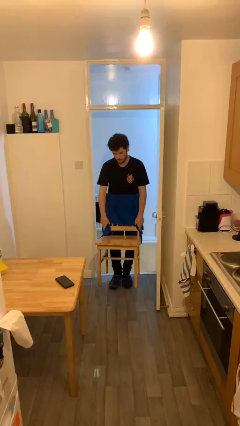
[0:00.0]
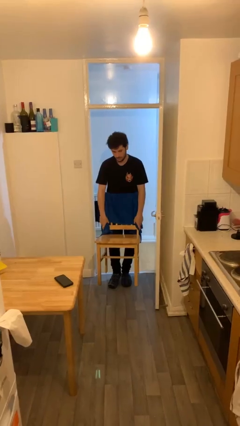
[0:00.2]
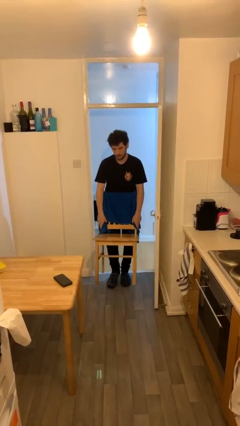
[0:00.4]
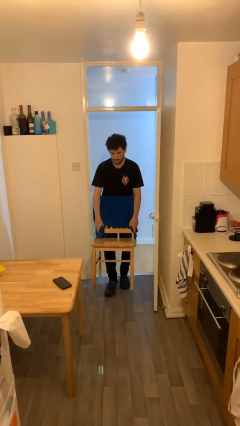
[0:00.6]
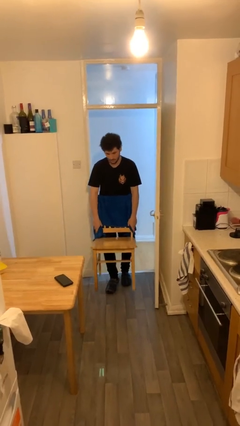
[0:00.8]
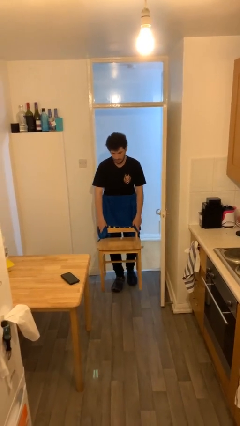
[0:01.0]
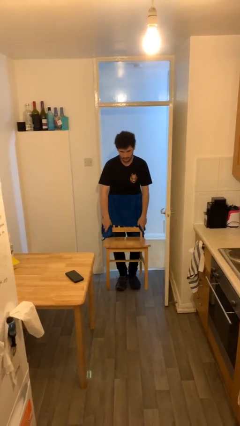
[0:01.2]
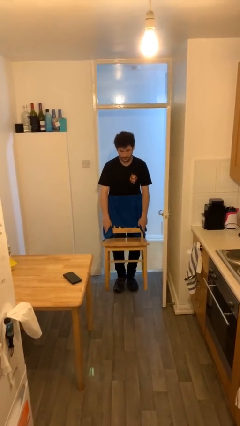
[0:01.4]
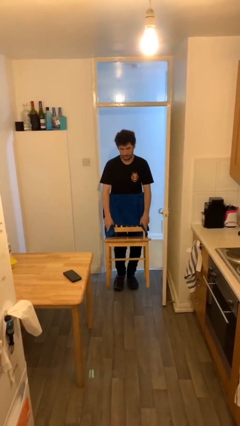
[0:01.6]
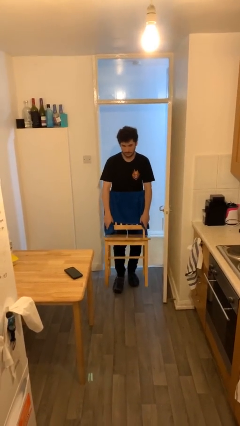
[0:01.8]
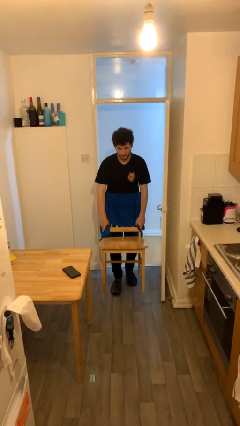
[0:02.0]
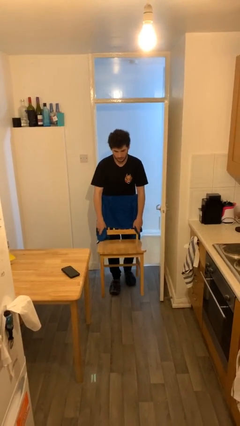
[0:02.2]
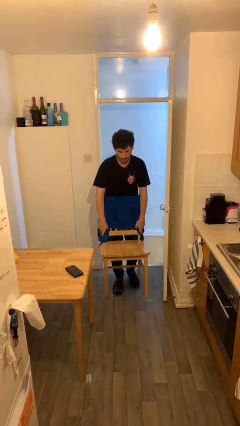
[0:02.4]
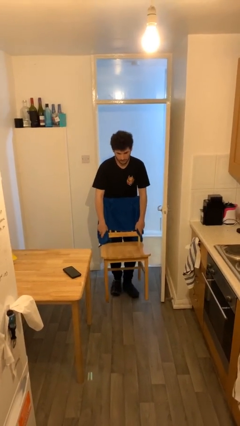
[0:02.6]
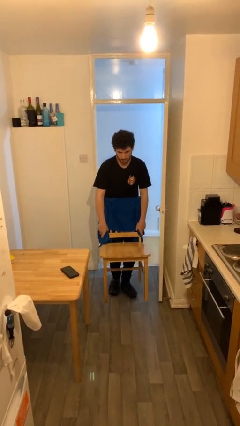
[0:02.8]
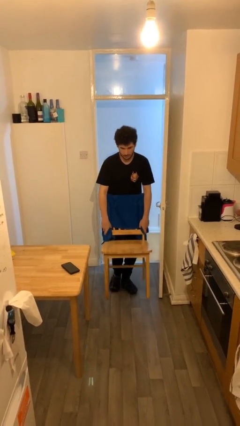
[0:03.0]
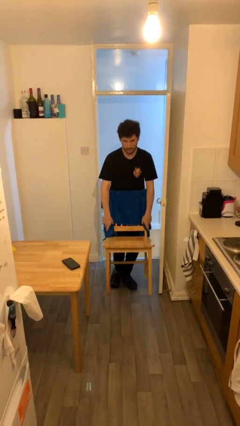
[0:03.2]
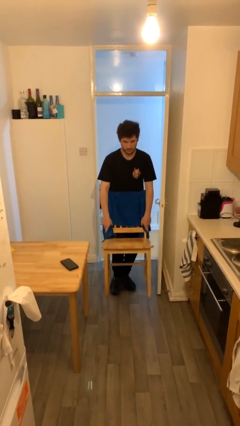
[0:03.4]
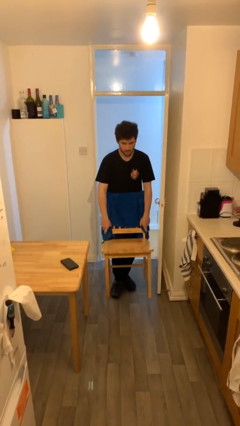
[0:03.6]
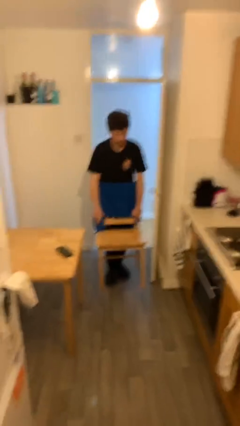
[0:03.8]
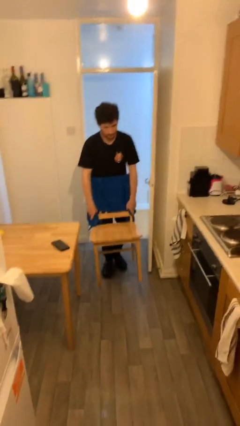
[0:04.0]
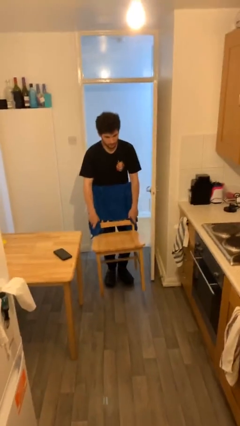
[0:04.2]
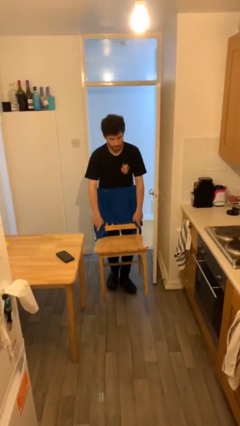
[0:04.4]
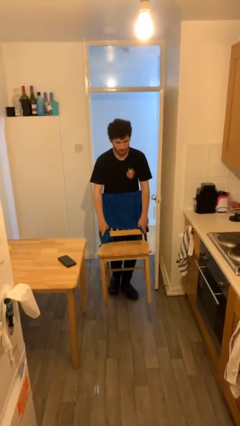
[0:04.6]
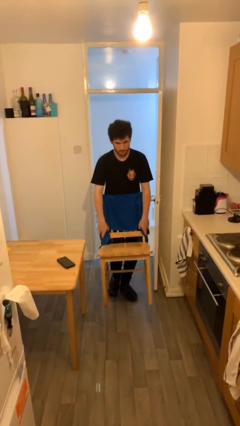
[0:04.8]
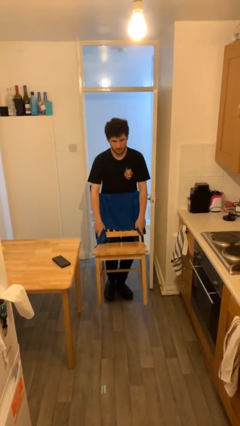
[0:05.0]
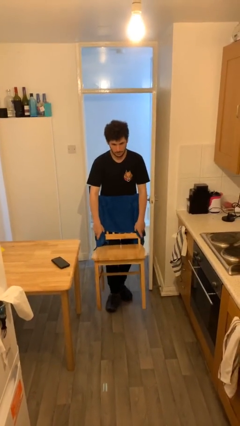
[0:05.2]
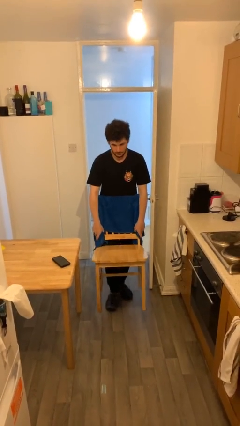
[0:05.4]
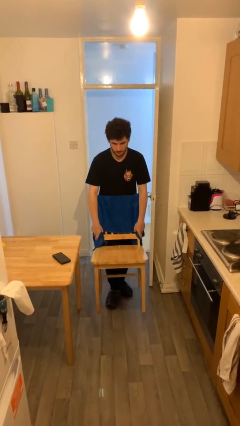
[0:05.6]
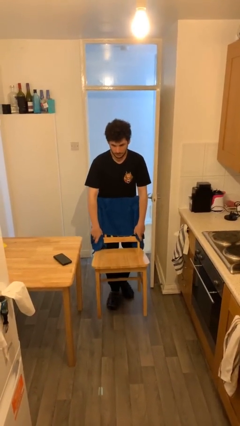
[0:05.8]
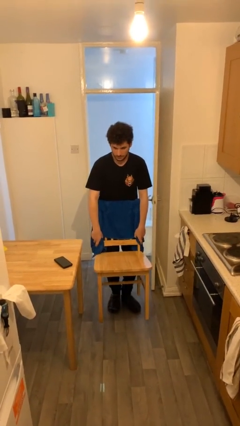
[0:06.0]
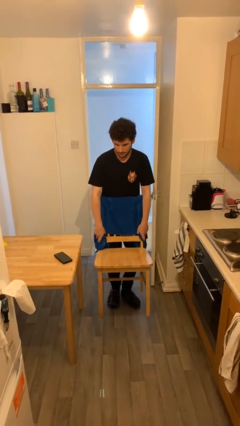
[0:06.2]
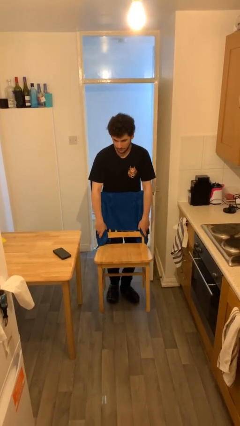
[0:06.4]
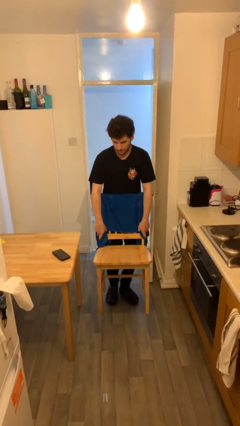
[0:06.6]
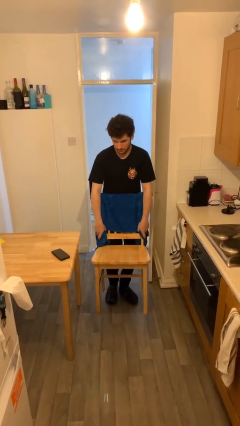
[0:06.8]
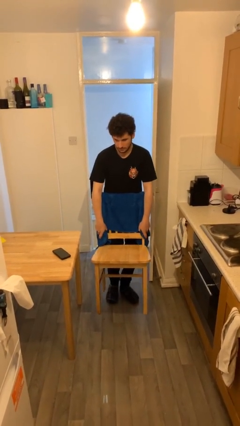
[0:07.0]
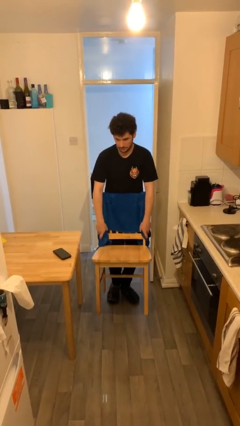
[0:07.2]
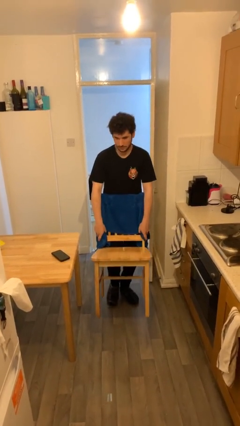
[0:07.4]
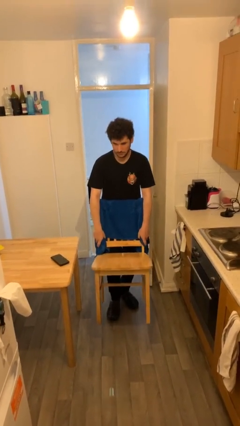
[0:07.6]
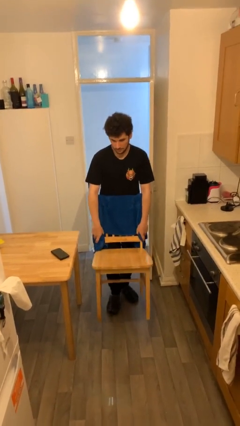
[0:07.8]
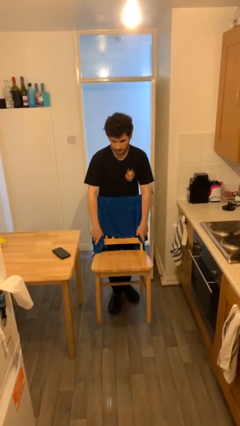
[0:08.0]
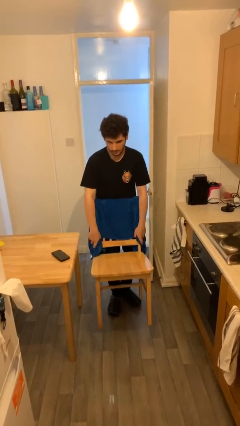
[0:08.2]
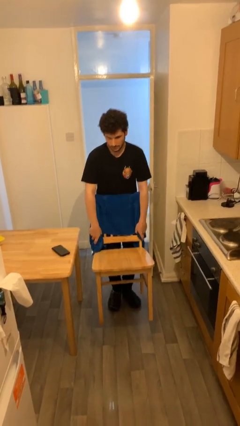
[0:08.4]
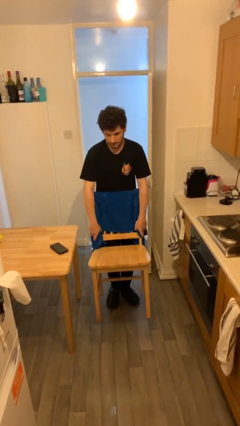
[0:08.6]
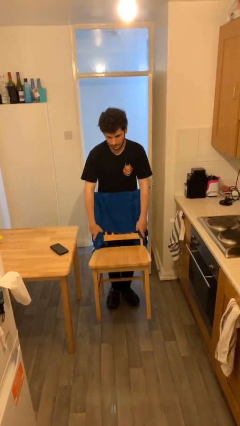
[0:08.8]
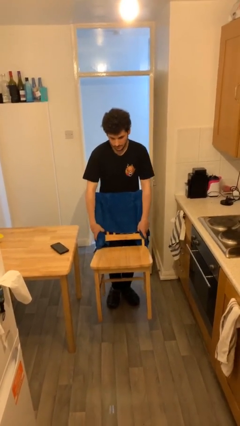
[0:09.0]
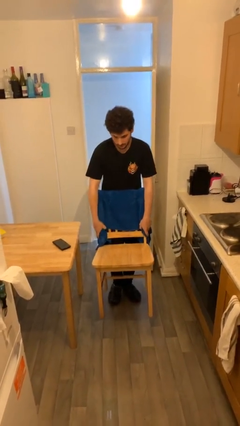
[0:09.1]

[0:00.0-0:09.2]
person carries heavy object

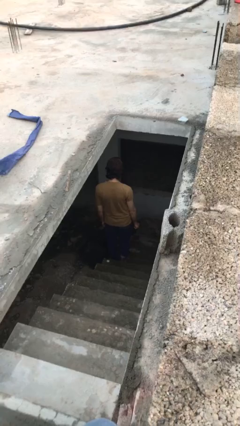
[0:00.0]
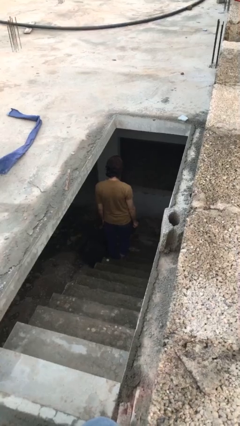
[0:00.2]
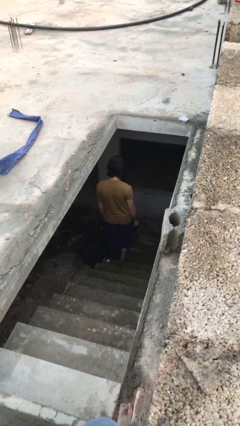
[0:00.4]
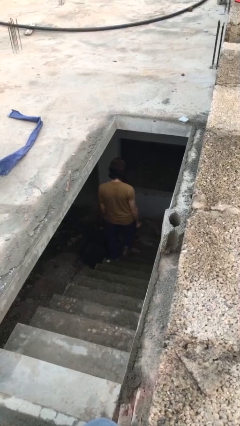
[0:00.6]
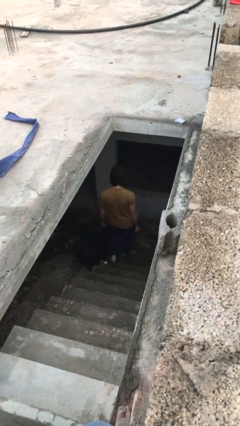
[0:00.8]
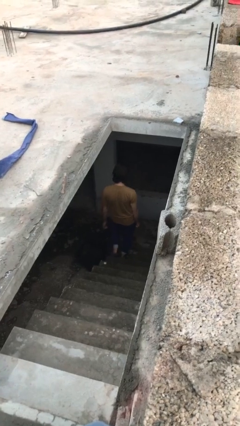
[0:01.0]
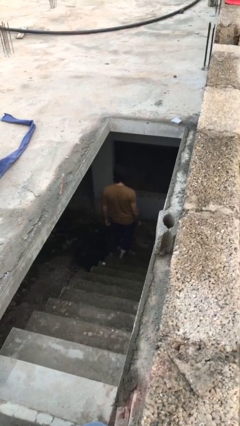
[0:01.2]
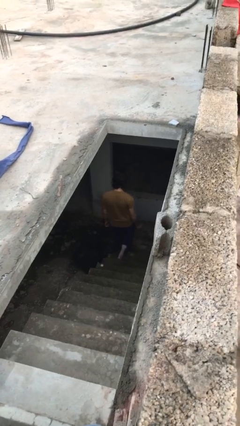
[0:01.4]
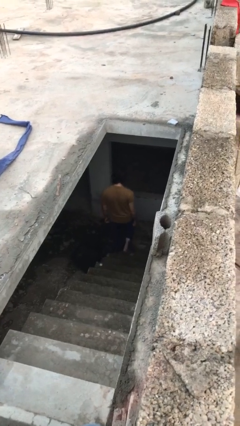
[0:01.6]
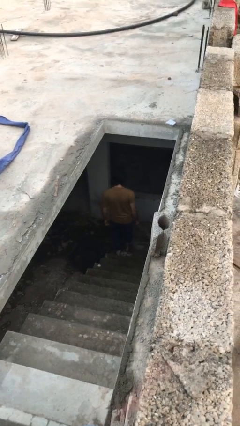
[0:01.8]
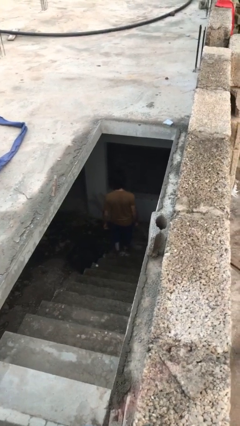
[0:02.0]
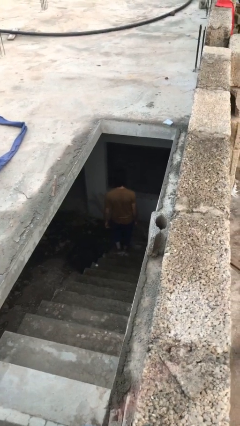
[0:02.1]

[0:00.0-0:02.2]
person climbs down stairs

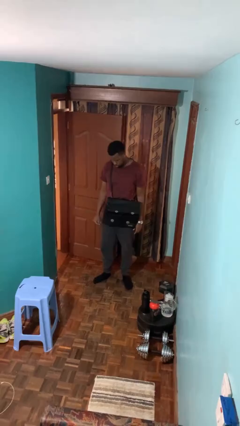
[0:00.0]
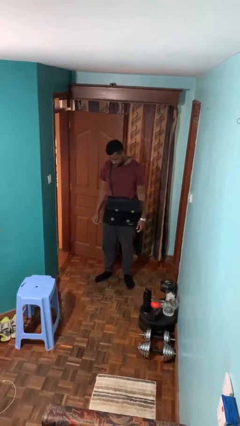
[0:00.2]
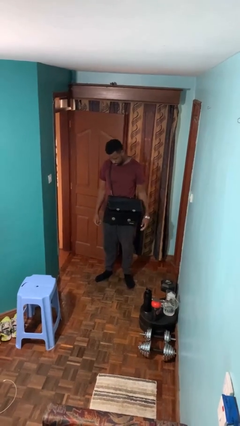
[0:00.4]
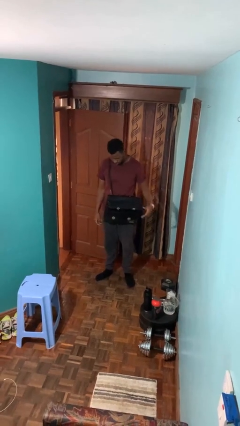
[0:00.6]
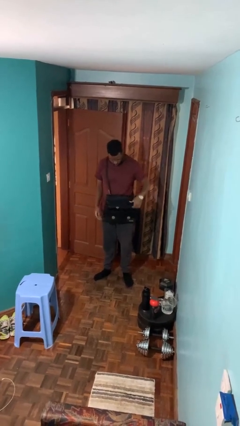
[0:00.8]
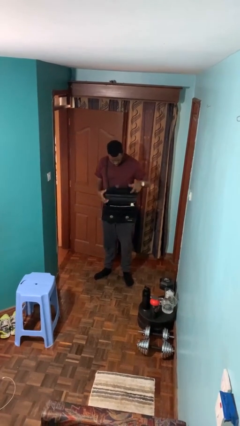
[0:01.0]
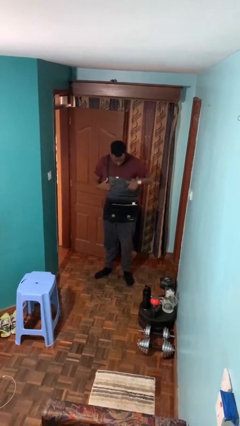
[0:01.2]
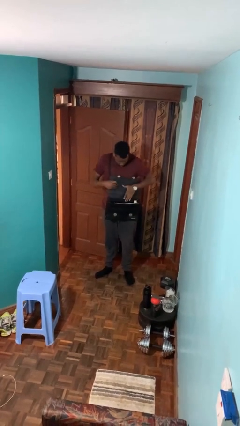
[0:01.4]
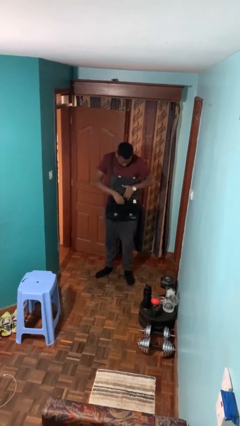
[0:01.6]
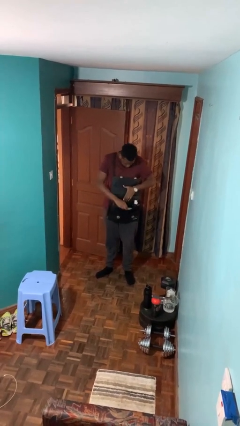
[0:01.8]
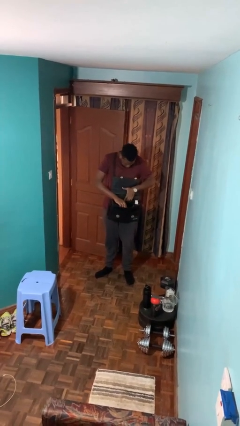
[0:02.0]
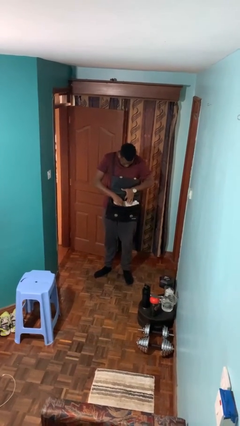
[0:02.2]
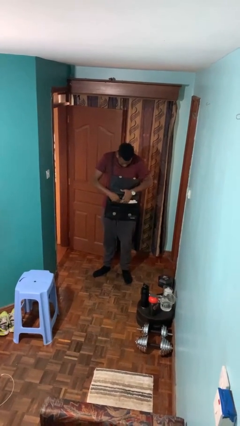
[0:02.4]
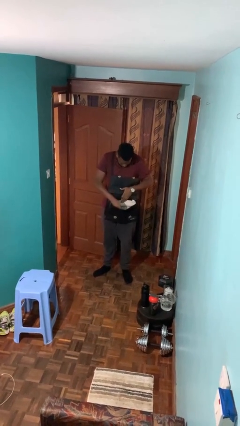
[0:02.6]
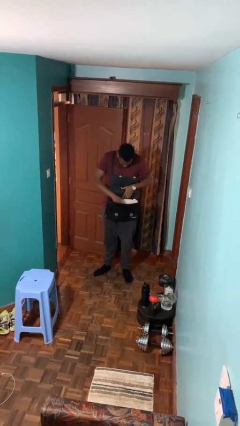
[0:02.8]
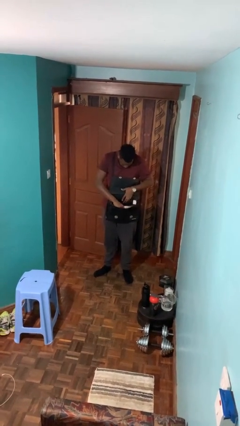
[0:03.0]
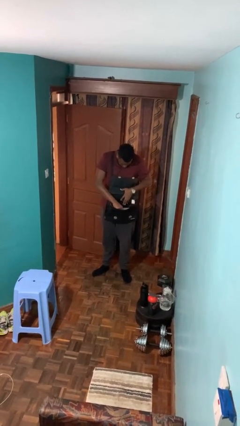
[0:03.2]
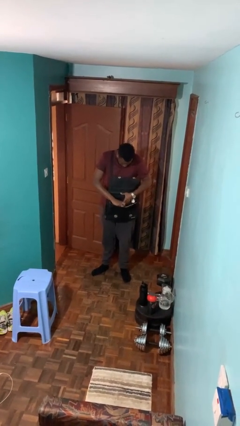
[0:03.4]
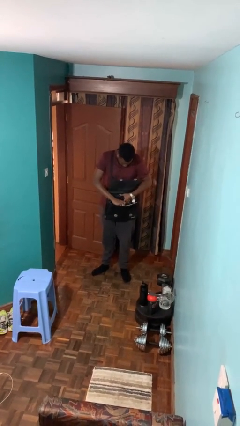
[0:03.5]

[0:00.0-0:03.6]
person searches in purse

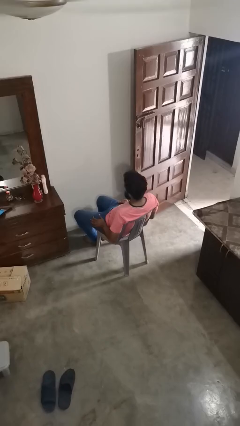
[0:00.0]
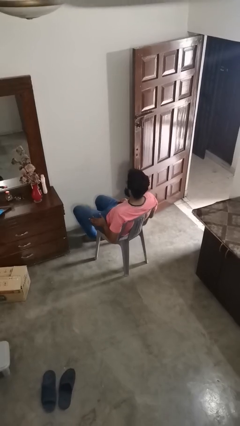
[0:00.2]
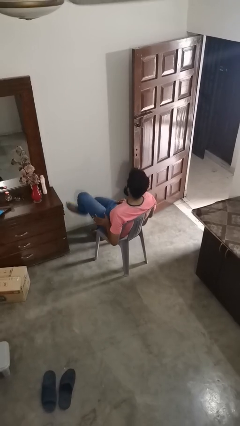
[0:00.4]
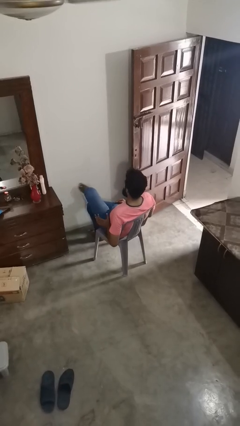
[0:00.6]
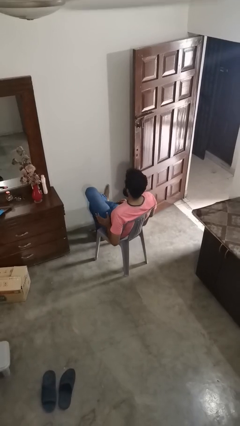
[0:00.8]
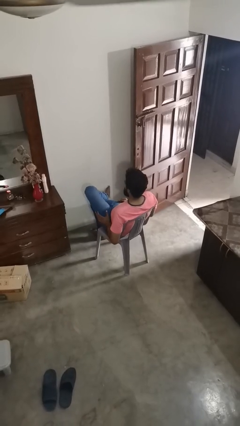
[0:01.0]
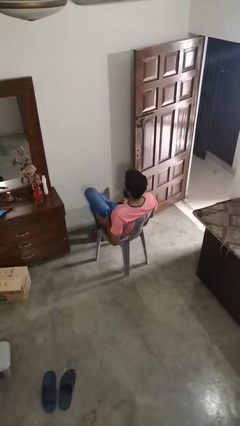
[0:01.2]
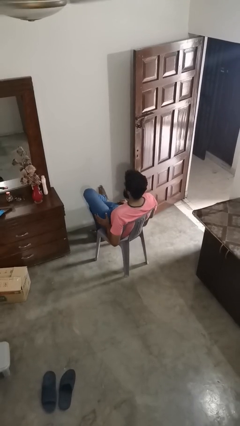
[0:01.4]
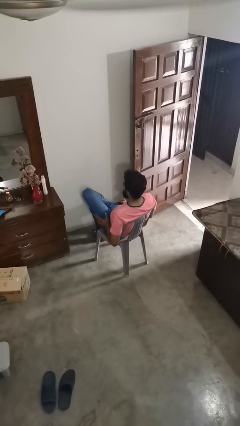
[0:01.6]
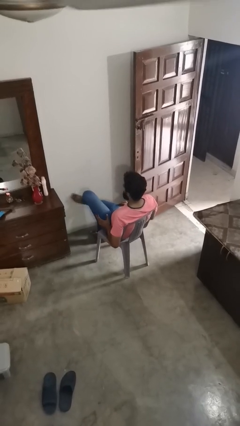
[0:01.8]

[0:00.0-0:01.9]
person crosses legs

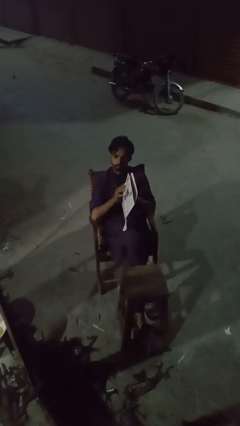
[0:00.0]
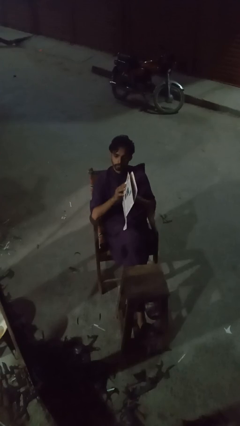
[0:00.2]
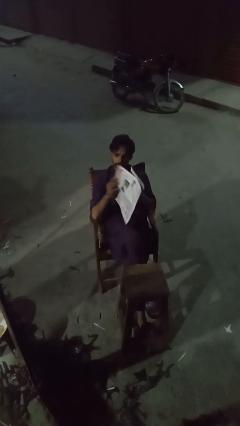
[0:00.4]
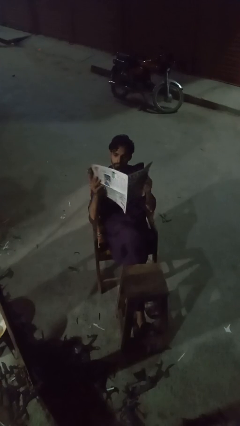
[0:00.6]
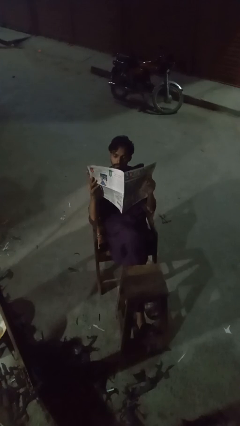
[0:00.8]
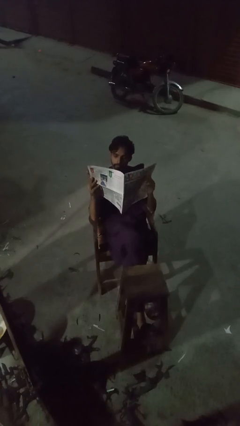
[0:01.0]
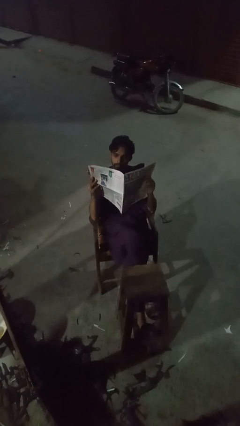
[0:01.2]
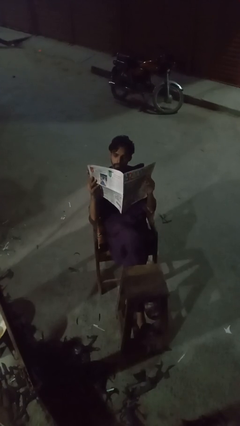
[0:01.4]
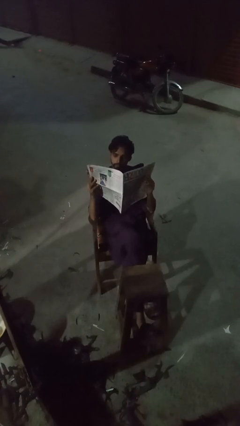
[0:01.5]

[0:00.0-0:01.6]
person reads newspaper
